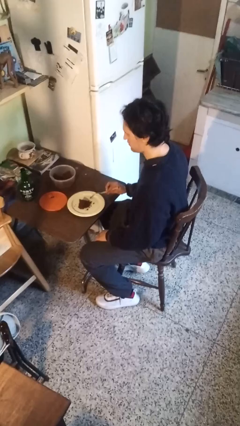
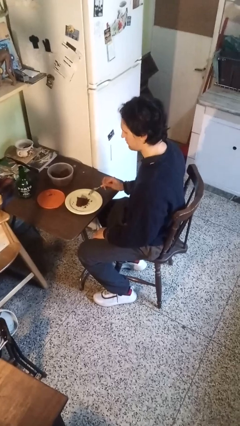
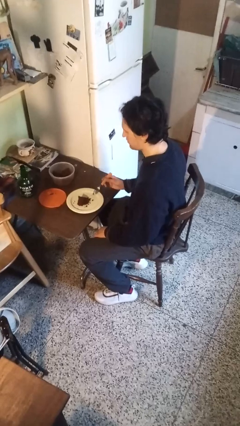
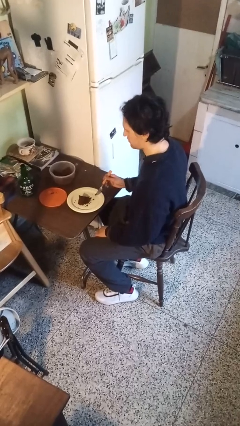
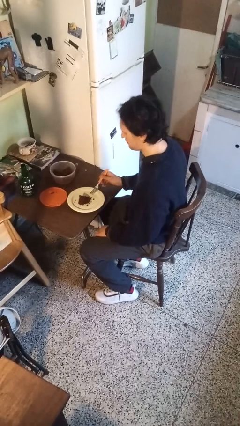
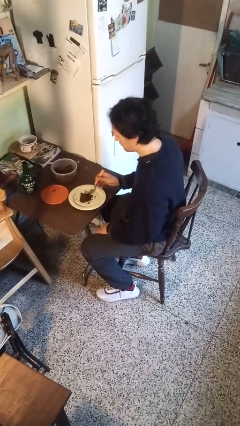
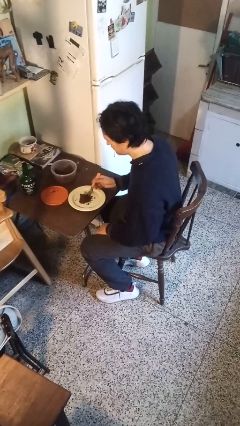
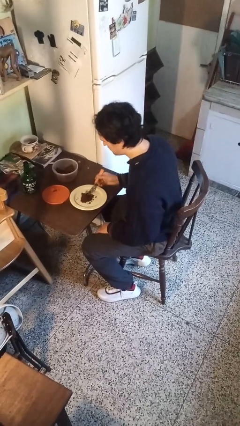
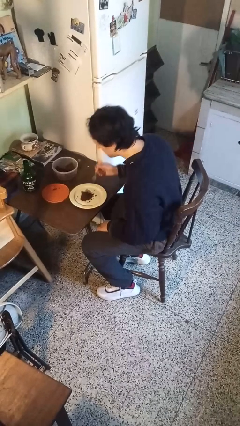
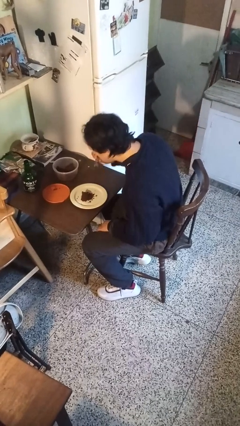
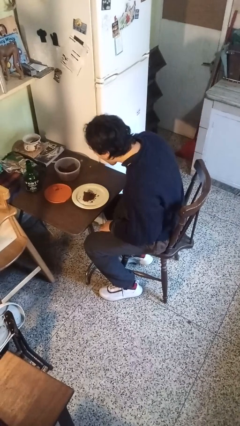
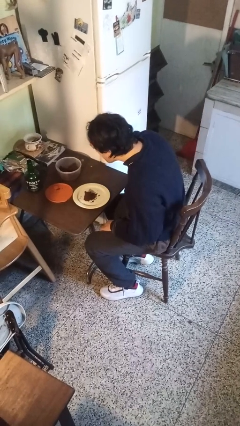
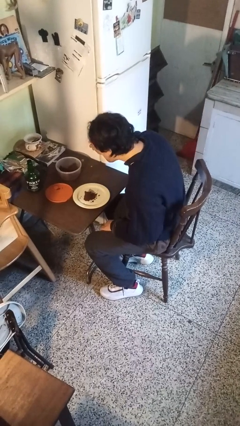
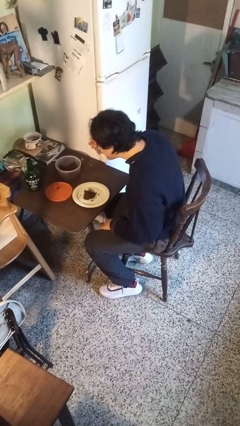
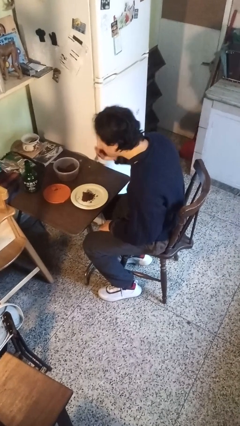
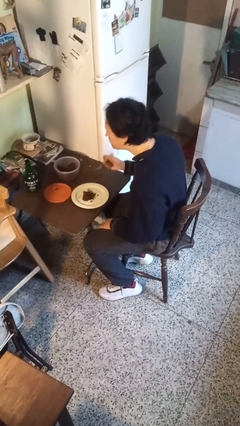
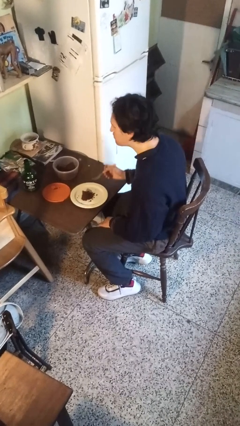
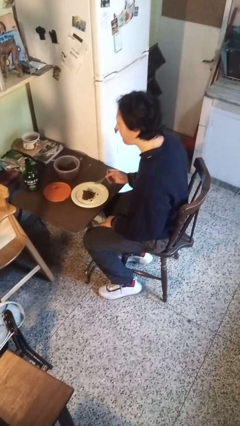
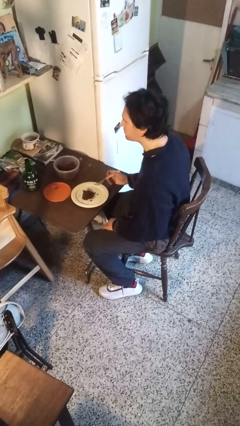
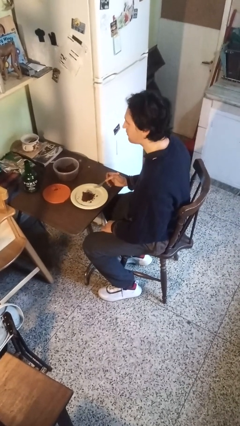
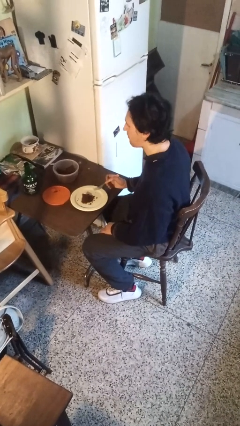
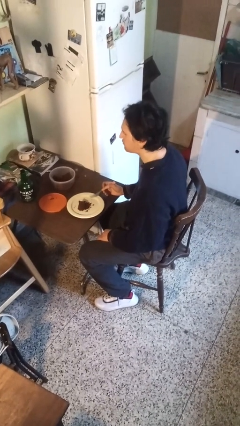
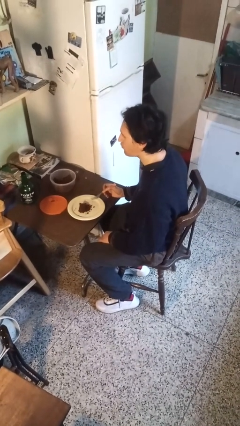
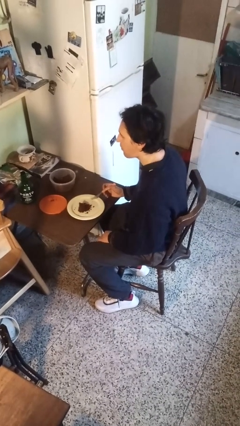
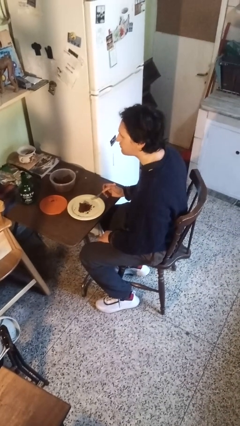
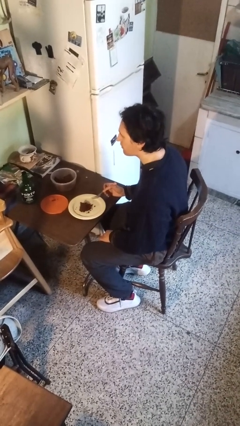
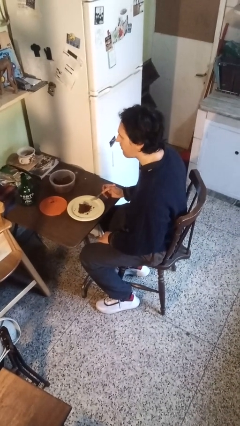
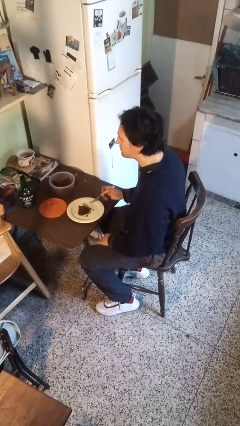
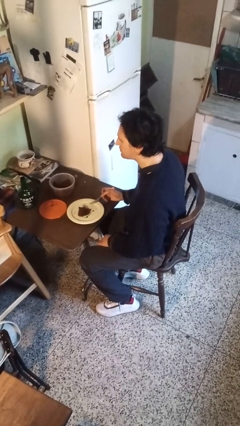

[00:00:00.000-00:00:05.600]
person eats with utensil

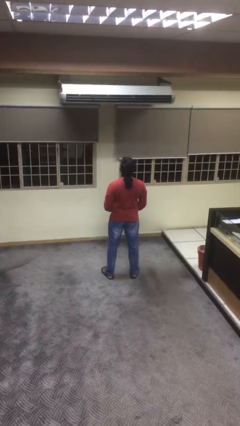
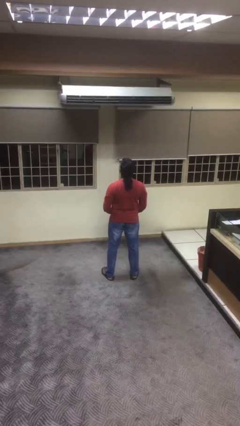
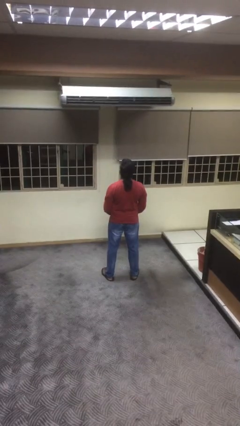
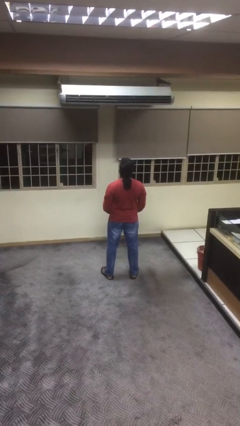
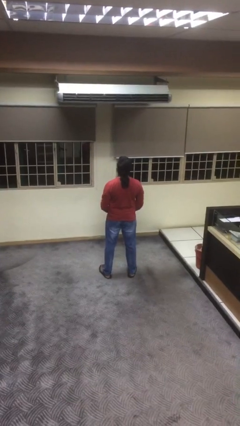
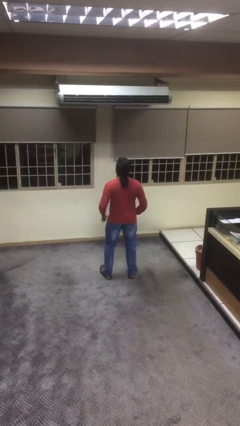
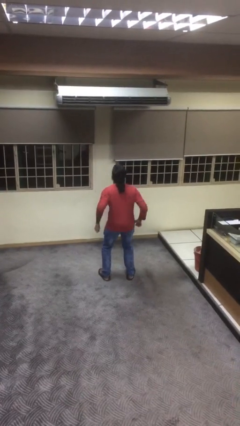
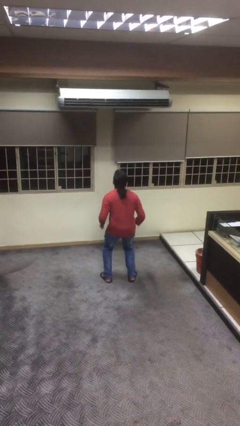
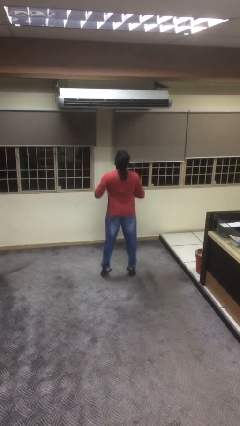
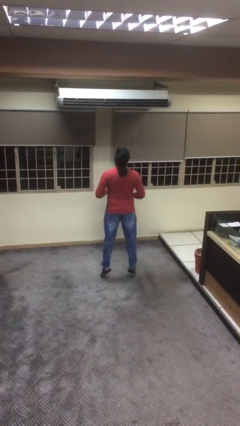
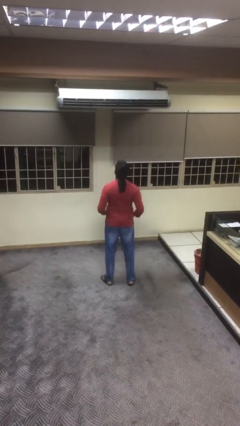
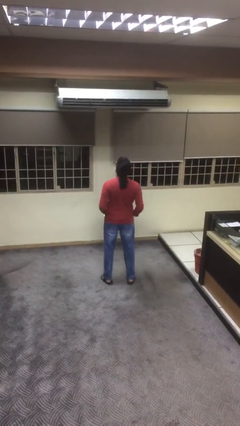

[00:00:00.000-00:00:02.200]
person jumps

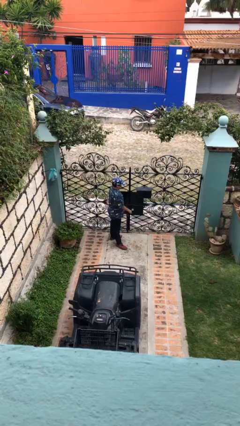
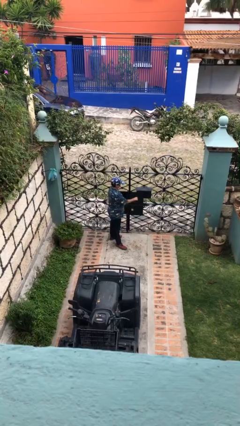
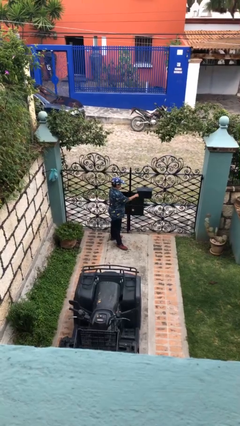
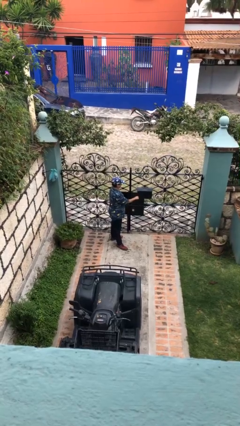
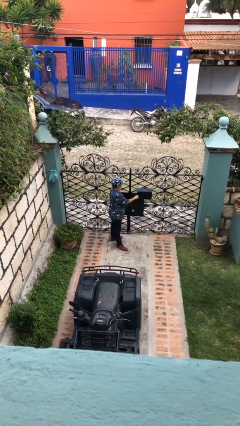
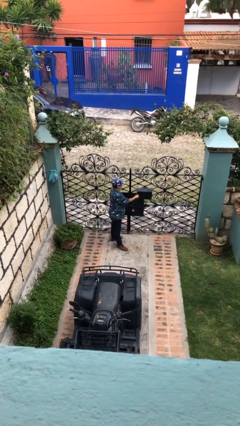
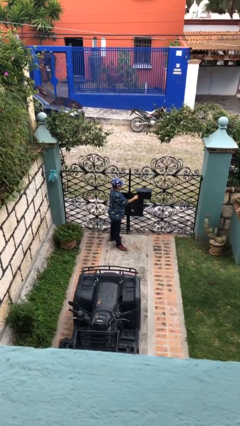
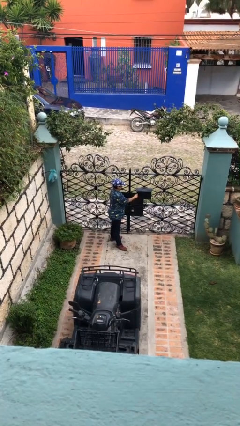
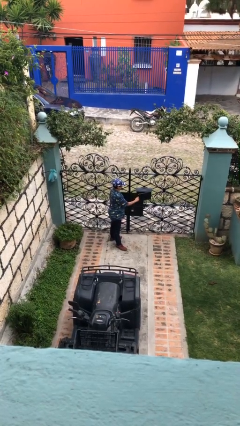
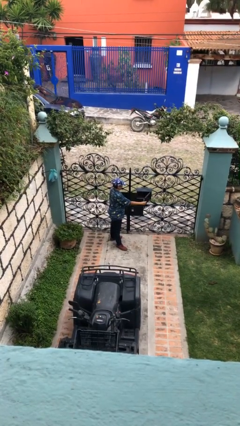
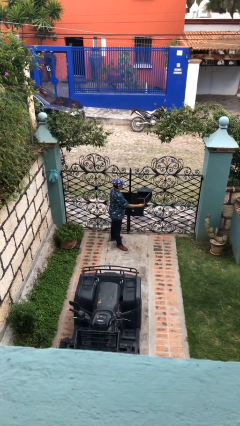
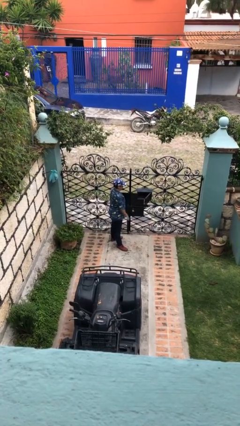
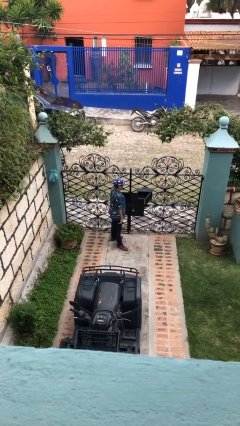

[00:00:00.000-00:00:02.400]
person opens mailbox

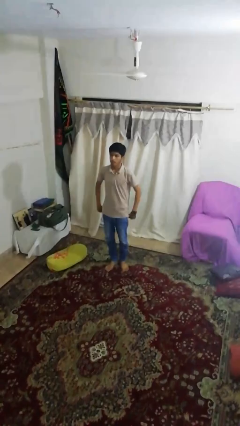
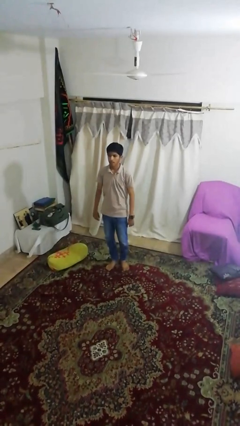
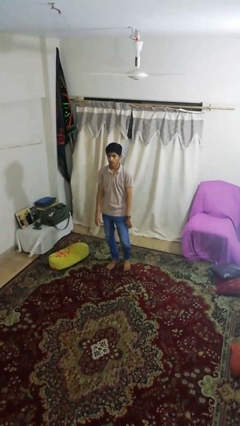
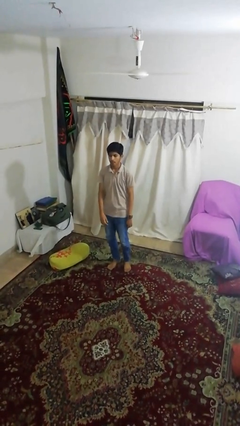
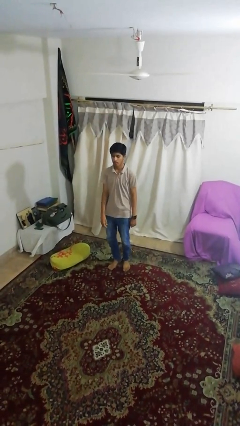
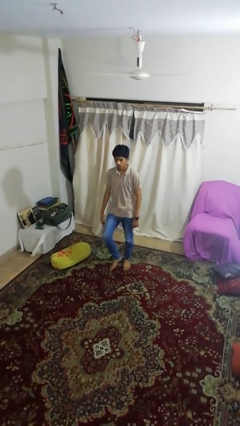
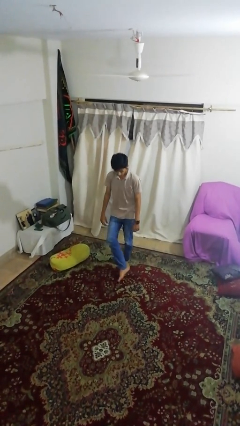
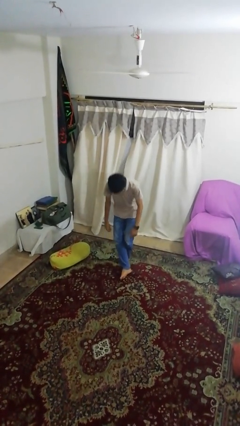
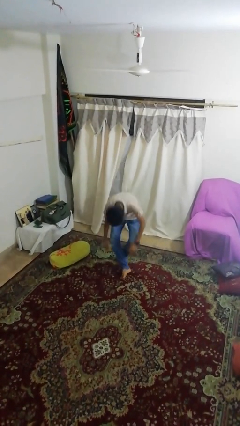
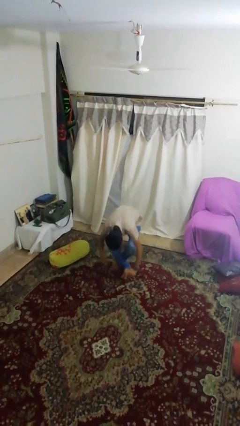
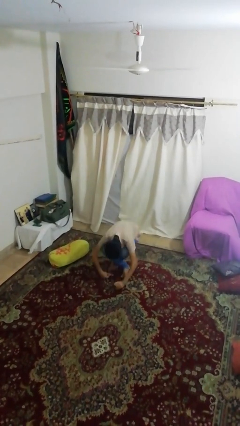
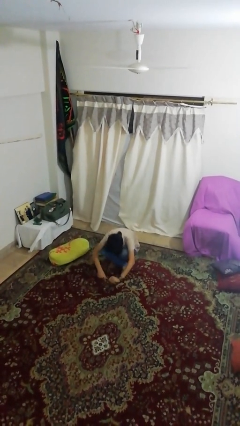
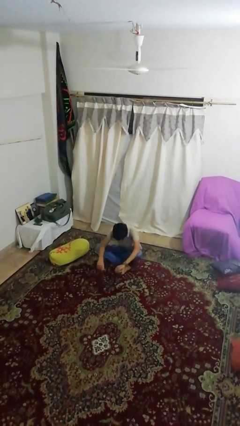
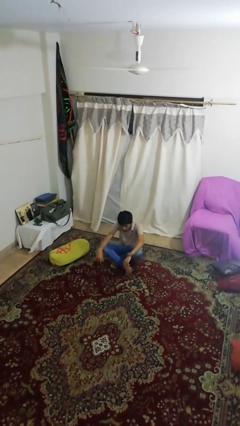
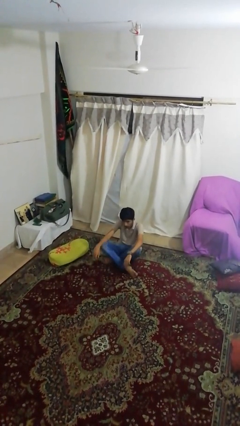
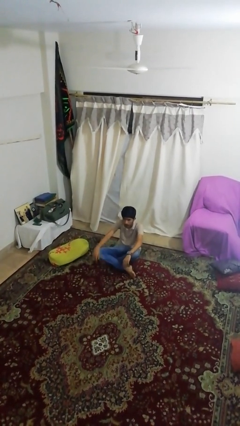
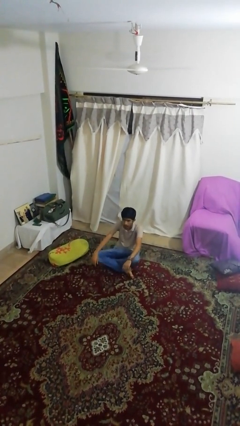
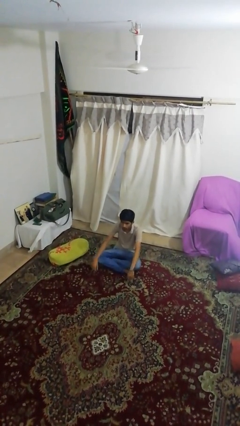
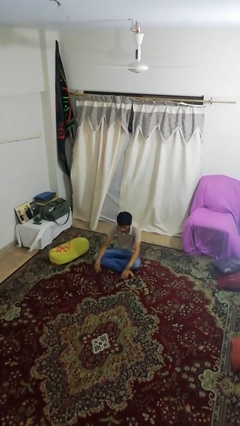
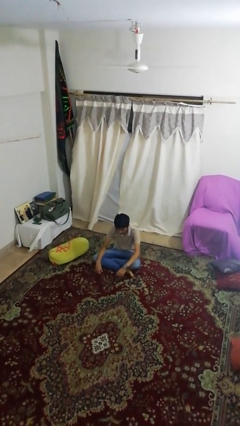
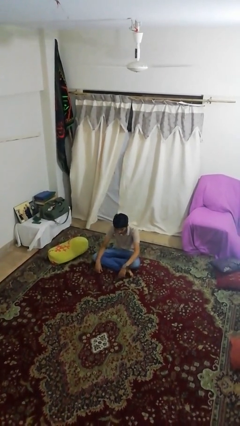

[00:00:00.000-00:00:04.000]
person sits crisscross

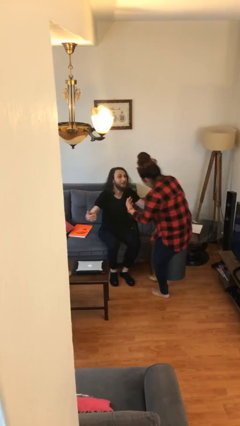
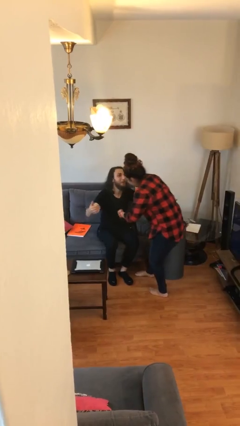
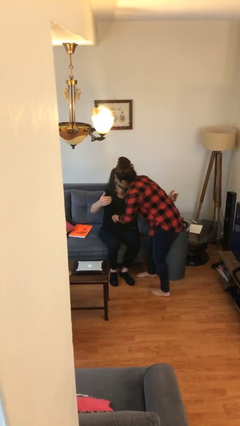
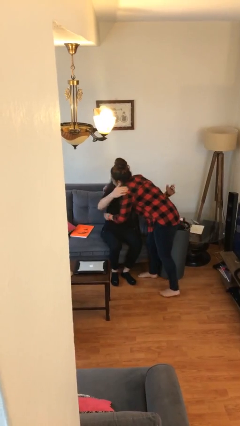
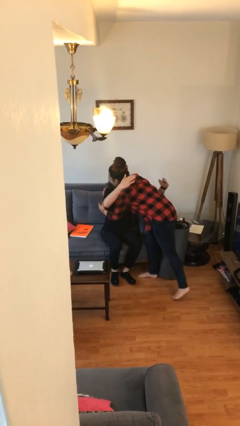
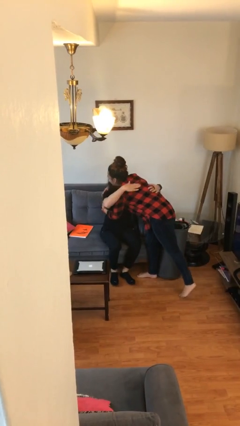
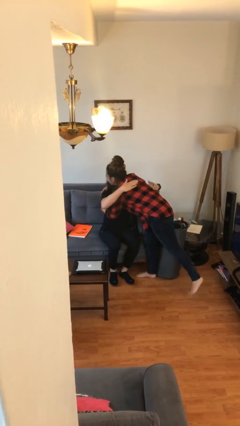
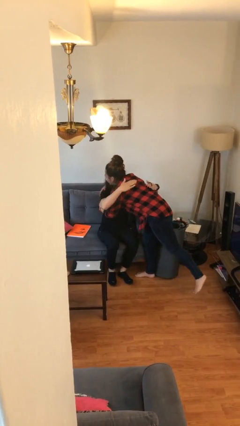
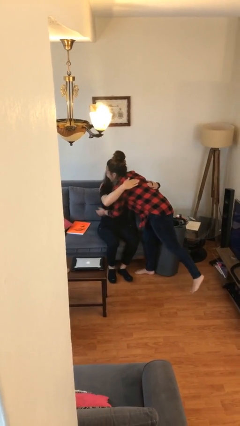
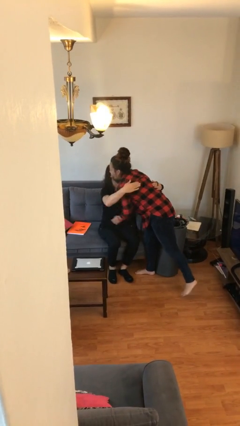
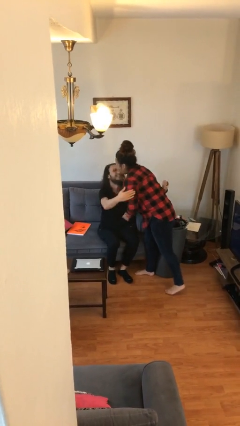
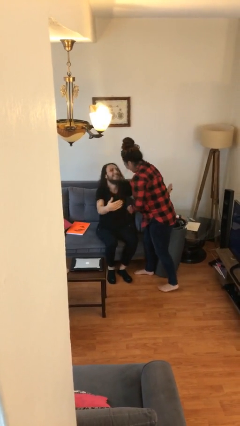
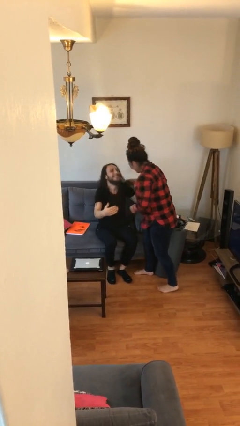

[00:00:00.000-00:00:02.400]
person embraces person

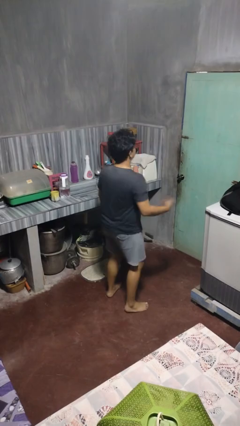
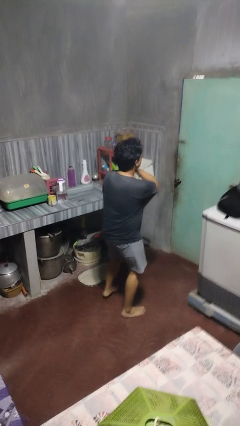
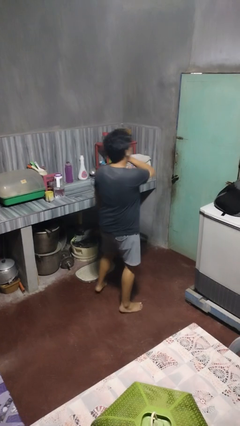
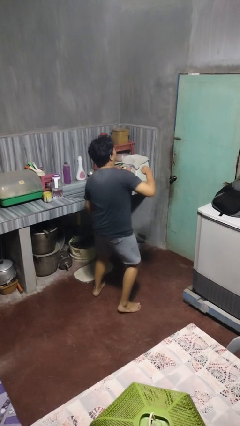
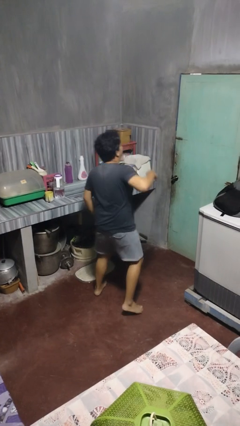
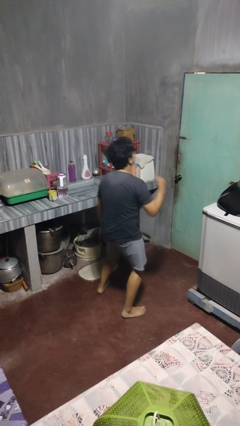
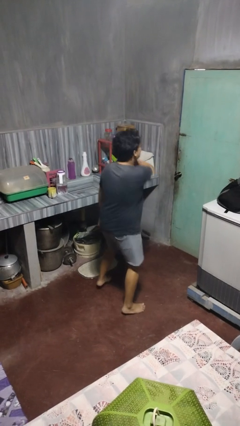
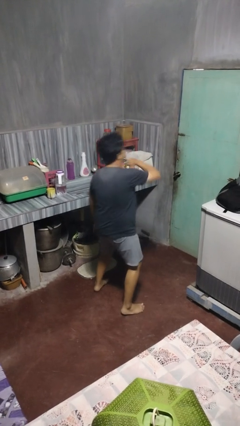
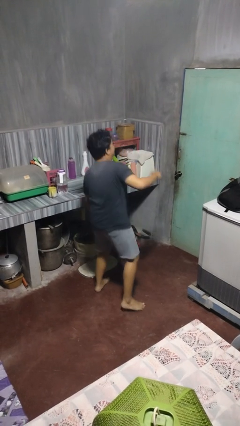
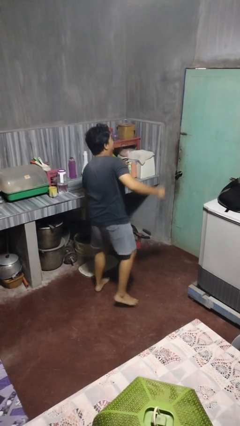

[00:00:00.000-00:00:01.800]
person dances in place
